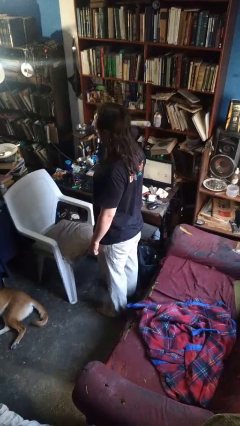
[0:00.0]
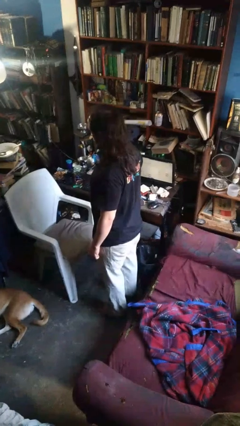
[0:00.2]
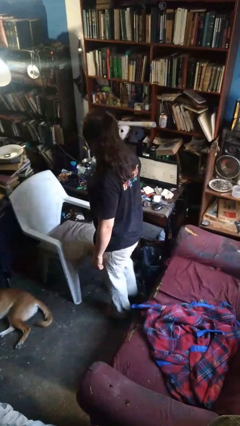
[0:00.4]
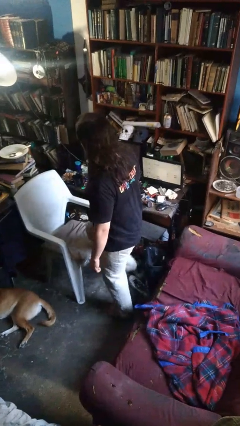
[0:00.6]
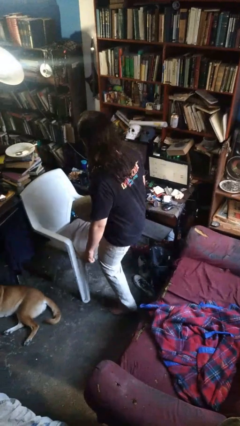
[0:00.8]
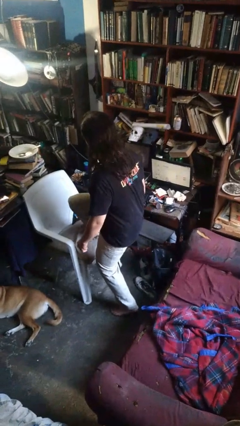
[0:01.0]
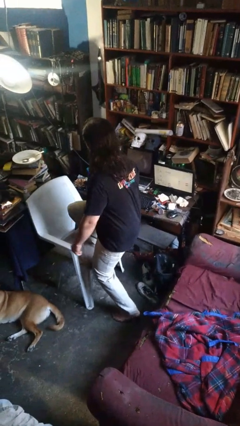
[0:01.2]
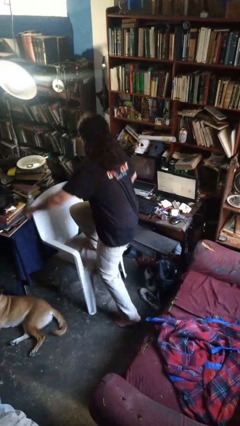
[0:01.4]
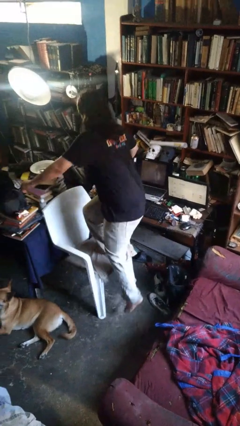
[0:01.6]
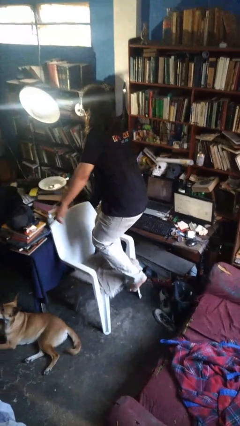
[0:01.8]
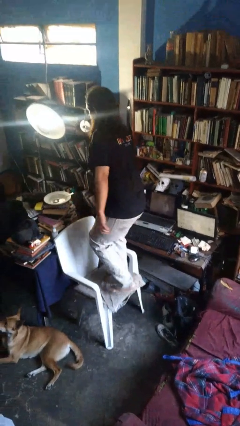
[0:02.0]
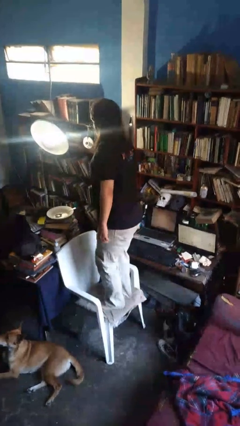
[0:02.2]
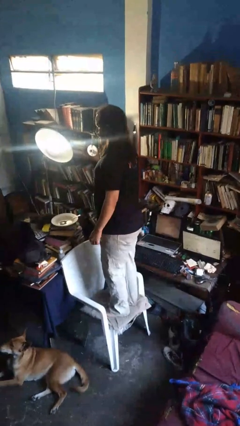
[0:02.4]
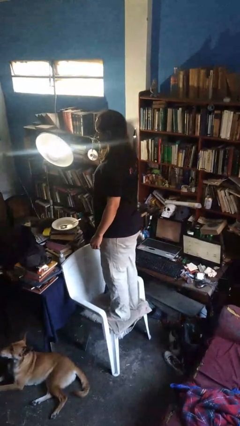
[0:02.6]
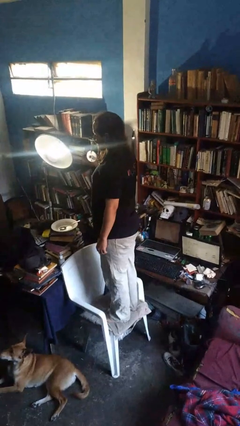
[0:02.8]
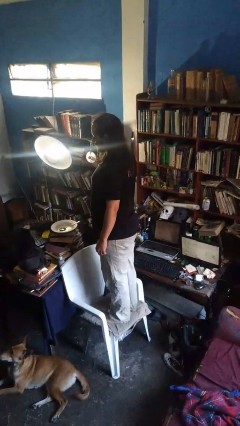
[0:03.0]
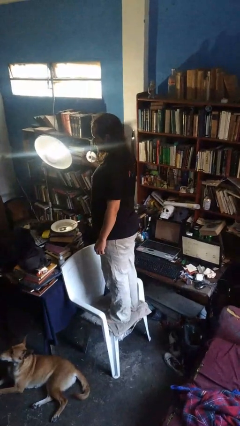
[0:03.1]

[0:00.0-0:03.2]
person climbs on chair

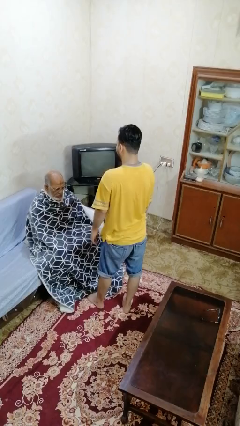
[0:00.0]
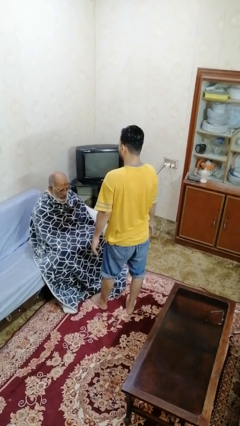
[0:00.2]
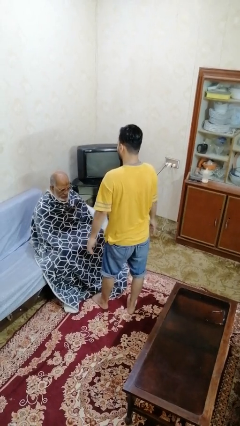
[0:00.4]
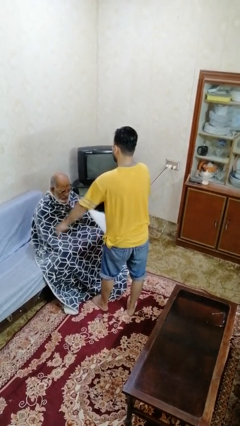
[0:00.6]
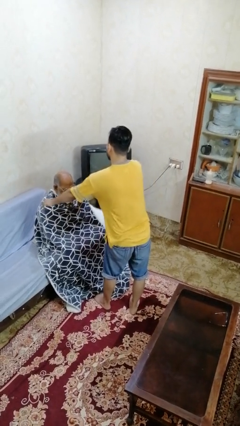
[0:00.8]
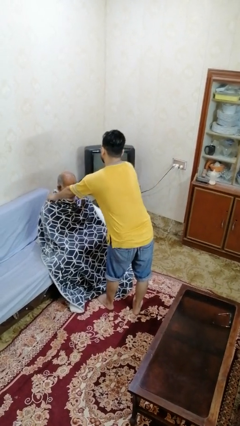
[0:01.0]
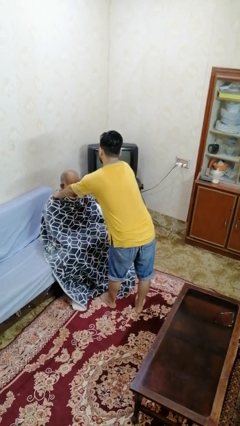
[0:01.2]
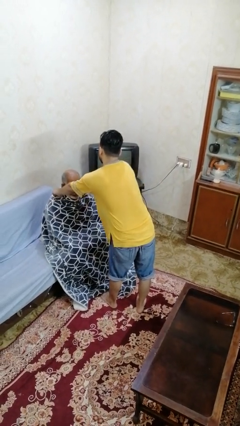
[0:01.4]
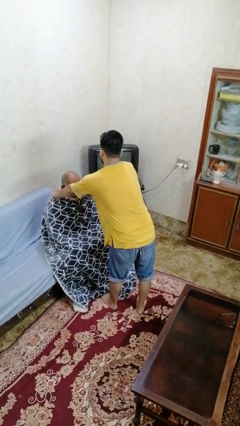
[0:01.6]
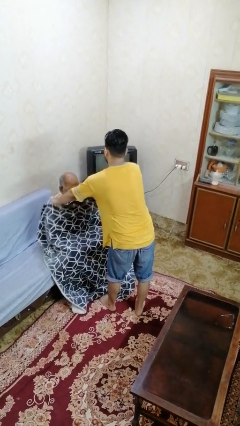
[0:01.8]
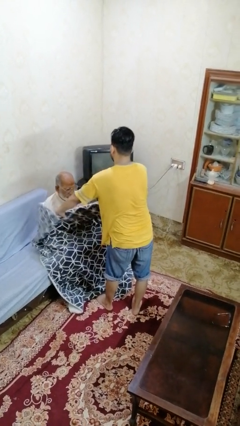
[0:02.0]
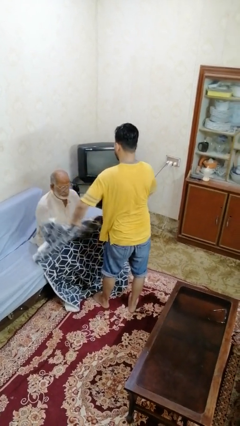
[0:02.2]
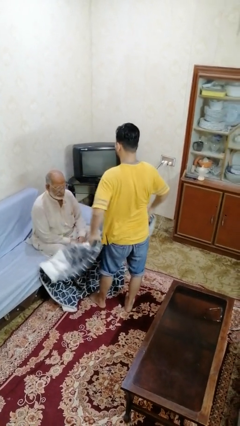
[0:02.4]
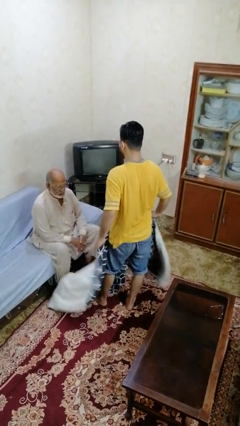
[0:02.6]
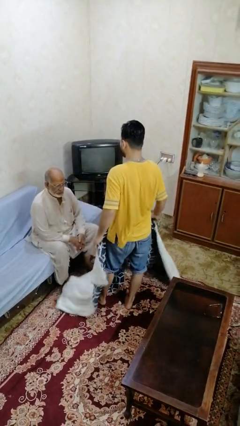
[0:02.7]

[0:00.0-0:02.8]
person uncovers friend with blanket

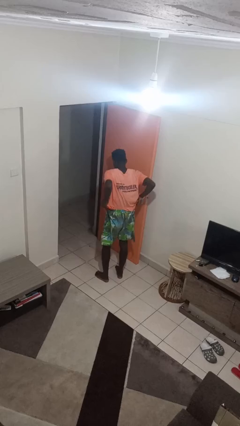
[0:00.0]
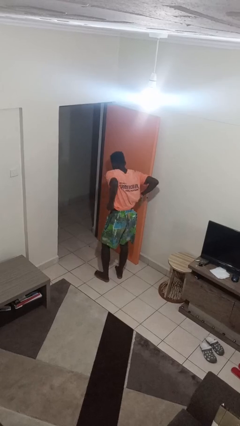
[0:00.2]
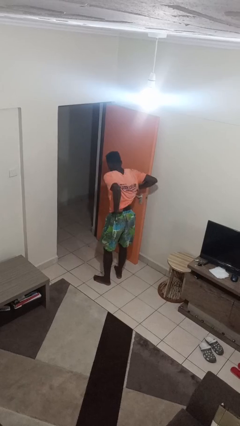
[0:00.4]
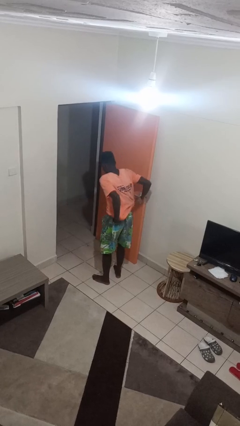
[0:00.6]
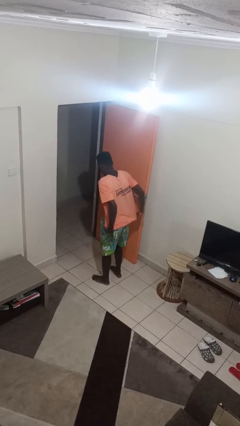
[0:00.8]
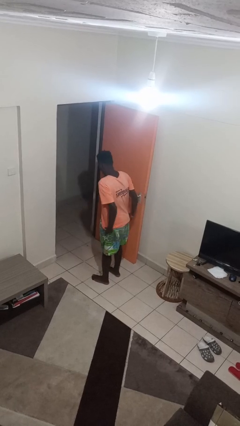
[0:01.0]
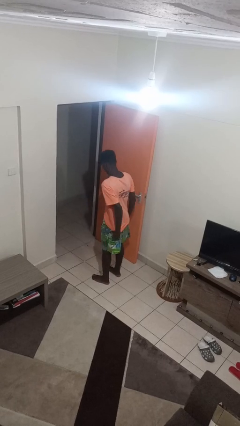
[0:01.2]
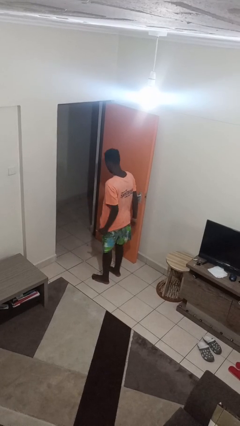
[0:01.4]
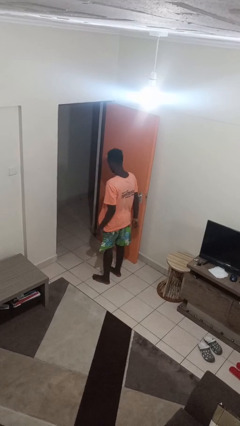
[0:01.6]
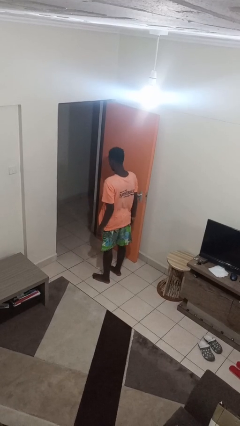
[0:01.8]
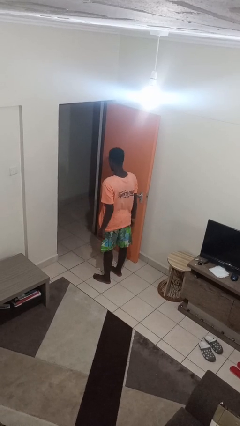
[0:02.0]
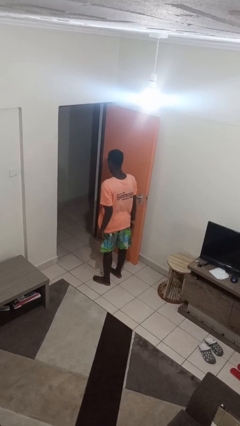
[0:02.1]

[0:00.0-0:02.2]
person untucks shirt

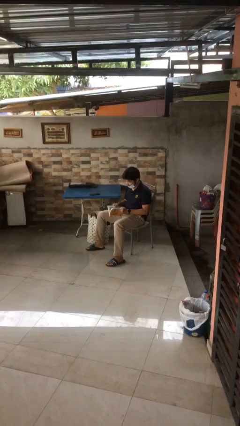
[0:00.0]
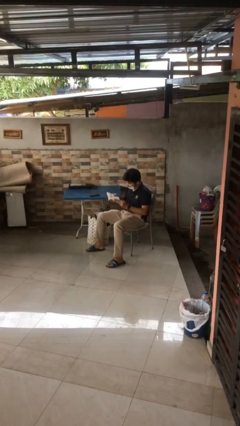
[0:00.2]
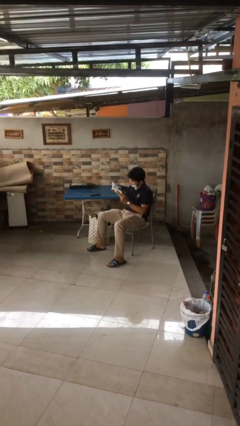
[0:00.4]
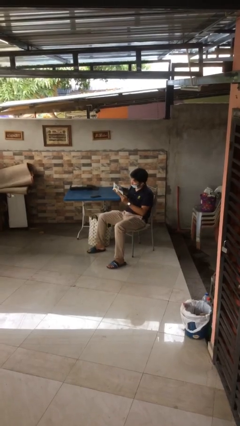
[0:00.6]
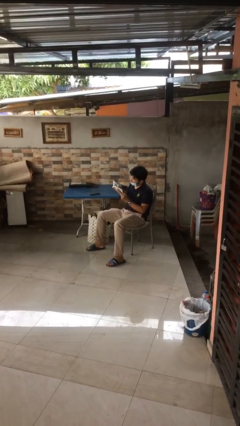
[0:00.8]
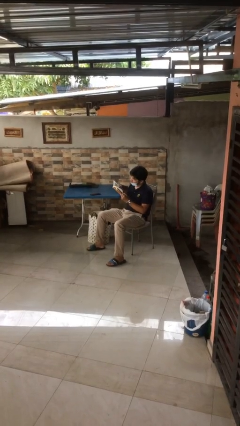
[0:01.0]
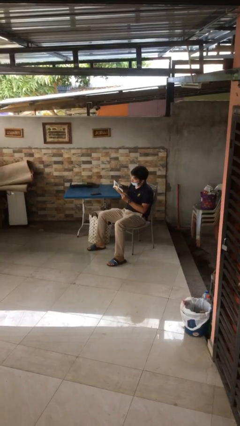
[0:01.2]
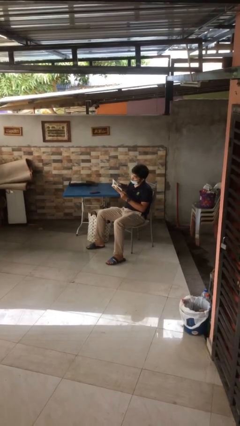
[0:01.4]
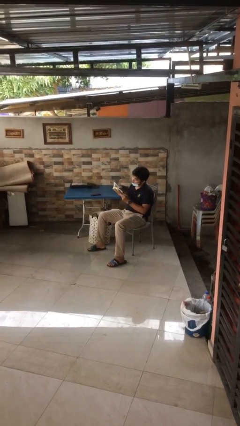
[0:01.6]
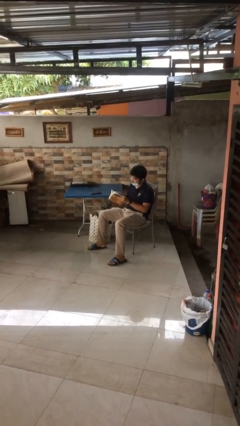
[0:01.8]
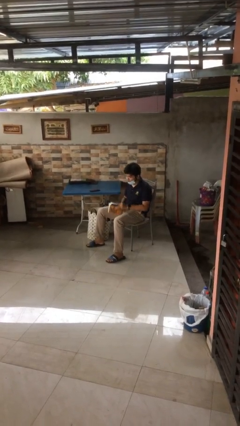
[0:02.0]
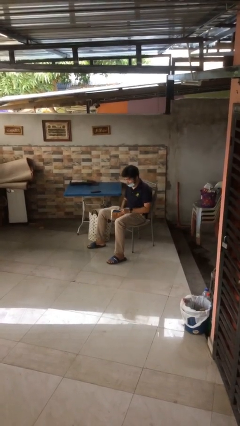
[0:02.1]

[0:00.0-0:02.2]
person reads book

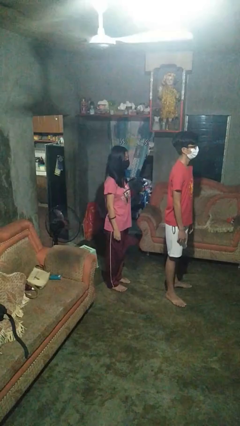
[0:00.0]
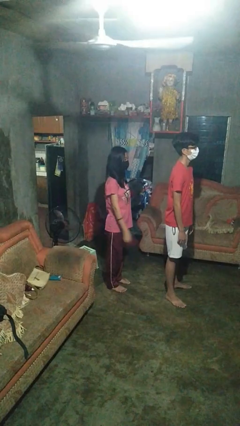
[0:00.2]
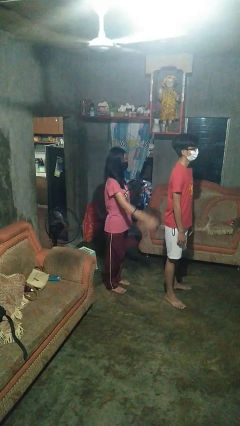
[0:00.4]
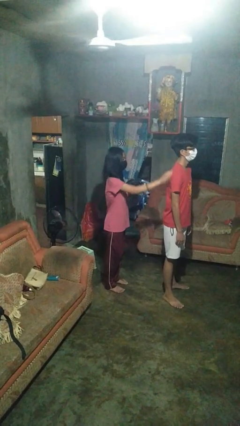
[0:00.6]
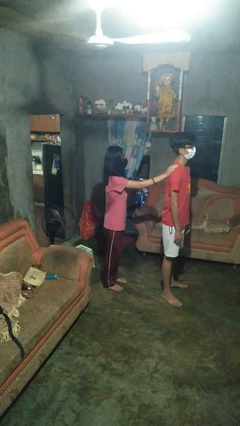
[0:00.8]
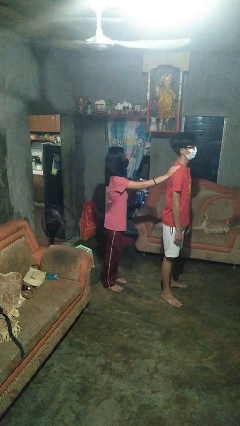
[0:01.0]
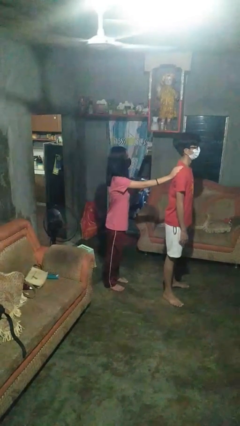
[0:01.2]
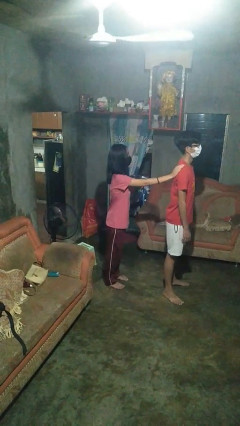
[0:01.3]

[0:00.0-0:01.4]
person touches back of person

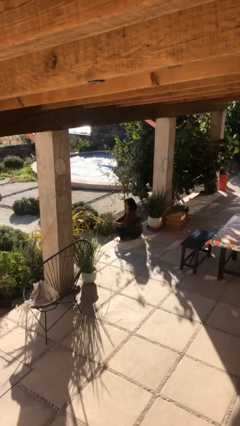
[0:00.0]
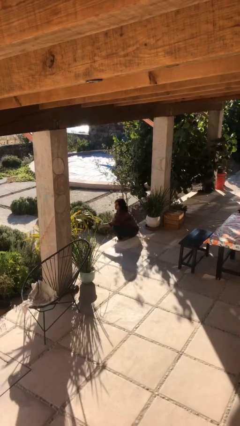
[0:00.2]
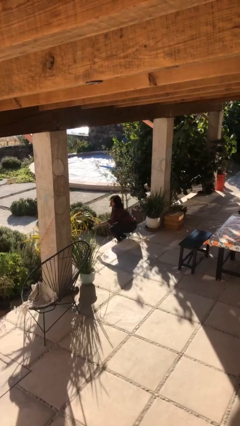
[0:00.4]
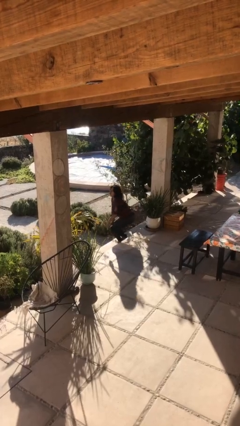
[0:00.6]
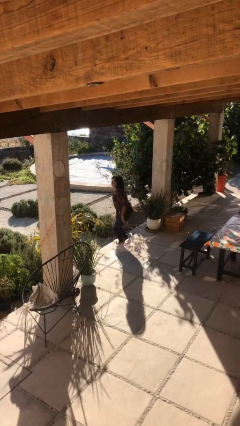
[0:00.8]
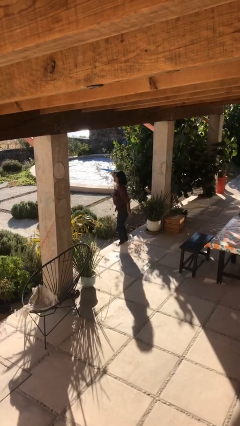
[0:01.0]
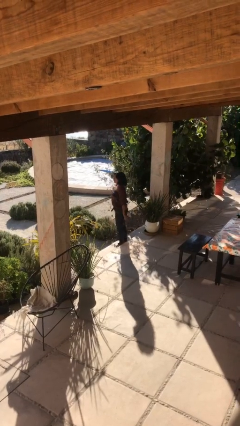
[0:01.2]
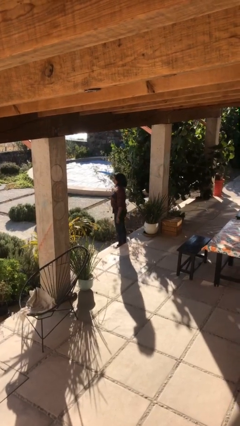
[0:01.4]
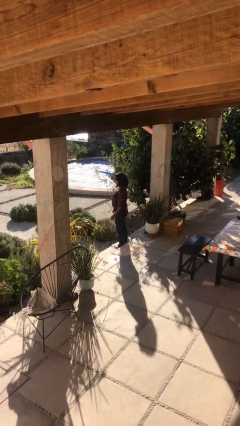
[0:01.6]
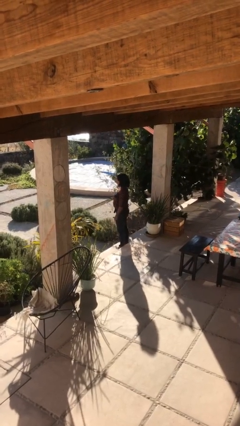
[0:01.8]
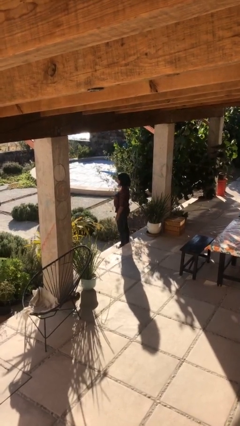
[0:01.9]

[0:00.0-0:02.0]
person stands up

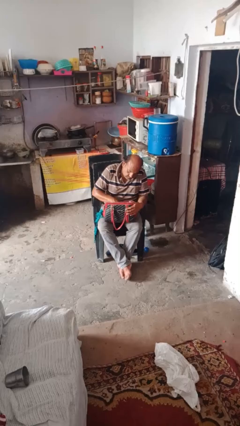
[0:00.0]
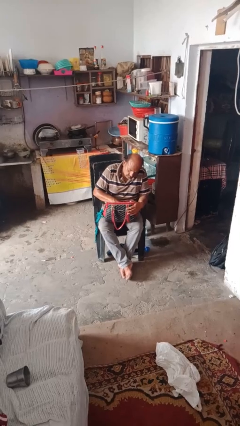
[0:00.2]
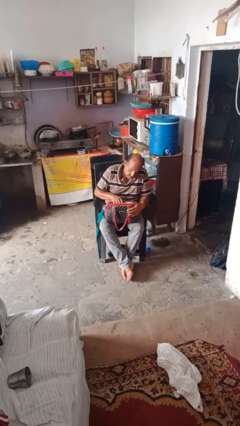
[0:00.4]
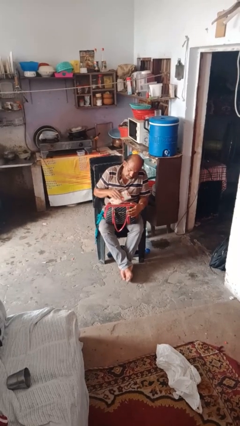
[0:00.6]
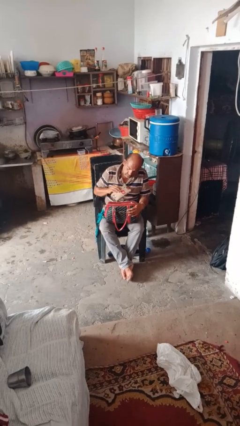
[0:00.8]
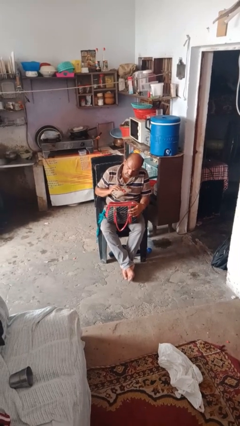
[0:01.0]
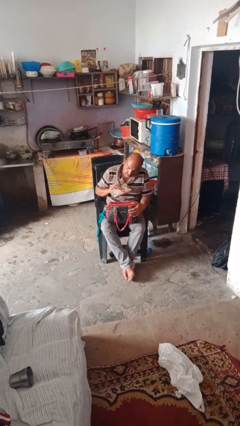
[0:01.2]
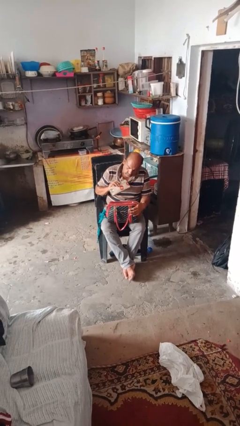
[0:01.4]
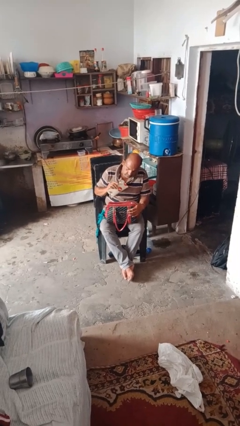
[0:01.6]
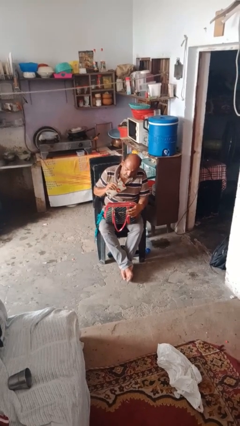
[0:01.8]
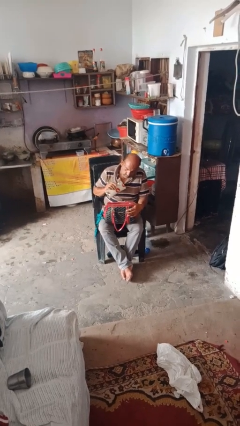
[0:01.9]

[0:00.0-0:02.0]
person takes object from purse

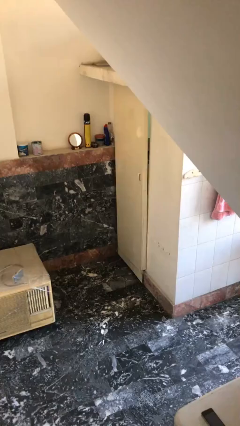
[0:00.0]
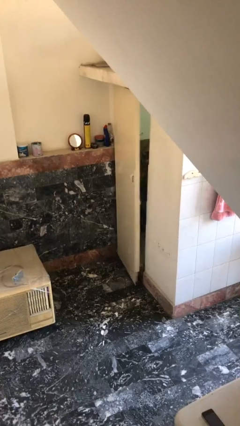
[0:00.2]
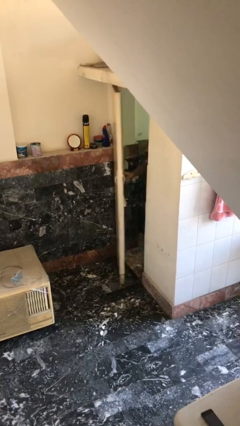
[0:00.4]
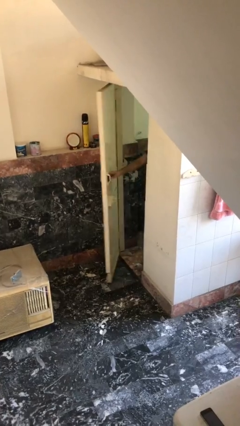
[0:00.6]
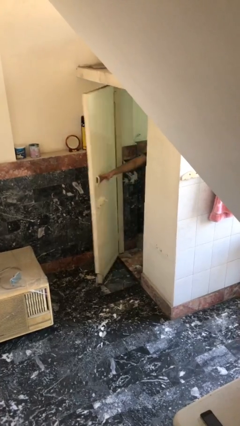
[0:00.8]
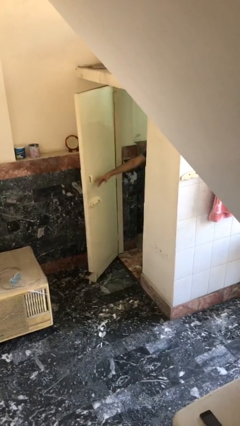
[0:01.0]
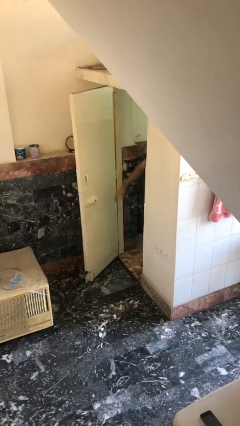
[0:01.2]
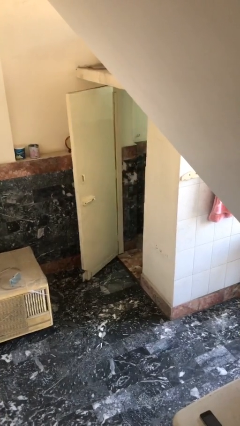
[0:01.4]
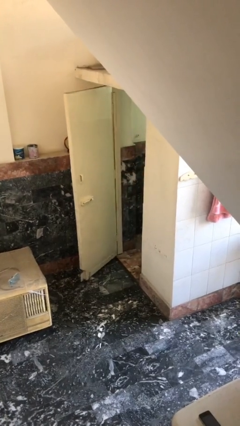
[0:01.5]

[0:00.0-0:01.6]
person opens facility door
